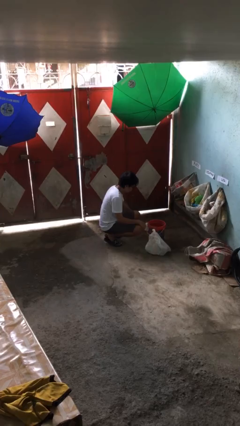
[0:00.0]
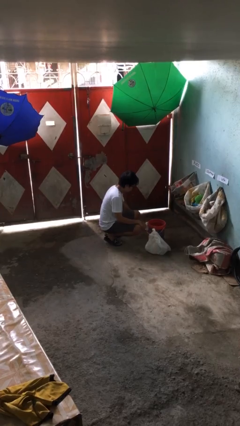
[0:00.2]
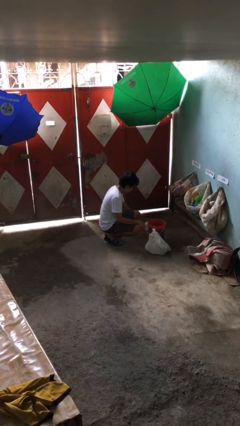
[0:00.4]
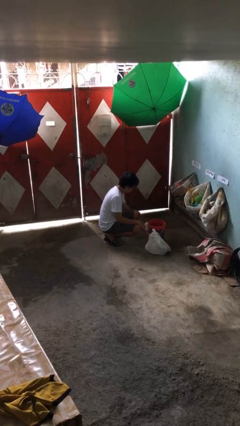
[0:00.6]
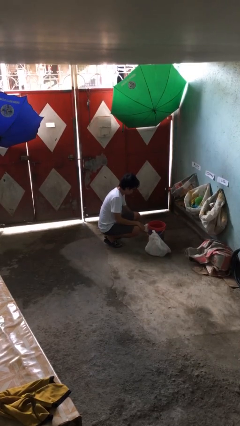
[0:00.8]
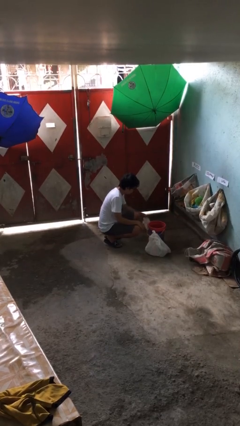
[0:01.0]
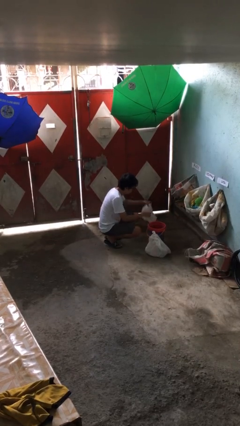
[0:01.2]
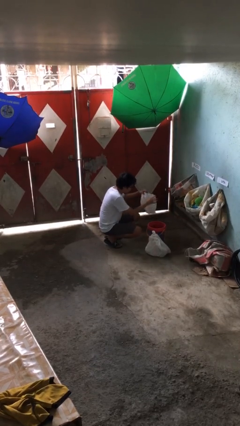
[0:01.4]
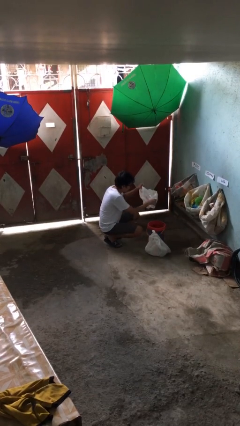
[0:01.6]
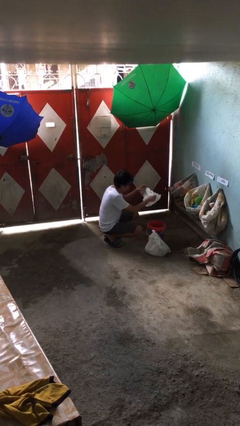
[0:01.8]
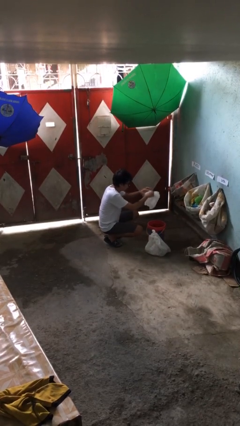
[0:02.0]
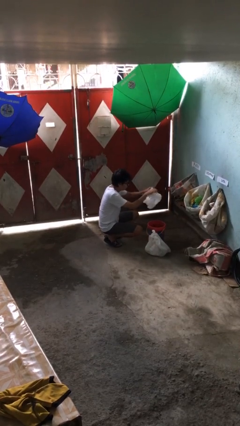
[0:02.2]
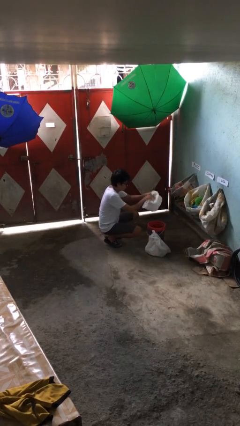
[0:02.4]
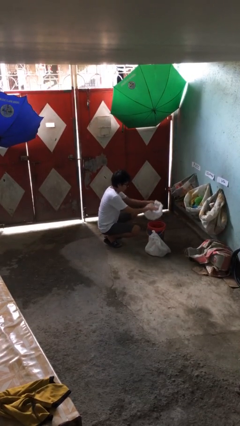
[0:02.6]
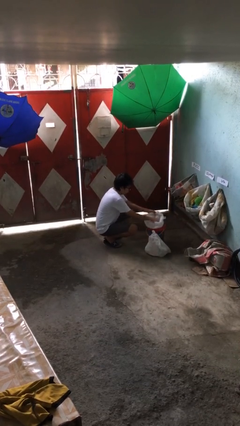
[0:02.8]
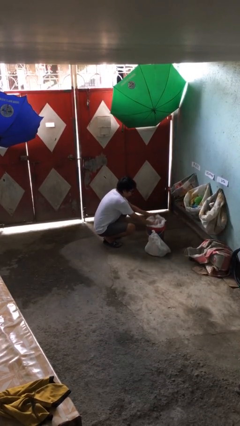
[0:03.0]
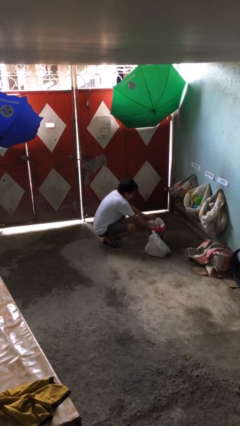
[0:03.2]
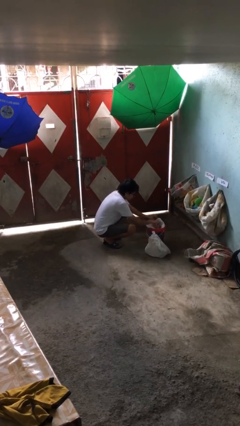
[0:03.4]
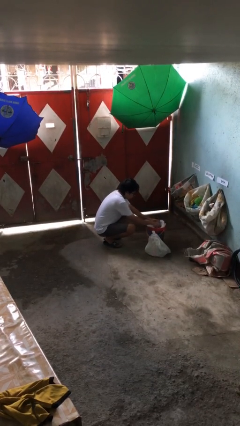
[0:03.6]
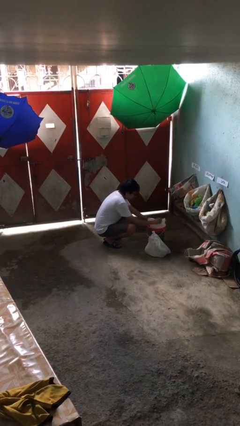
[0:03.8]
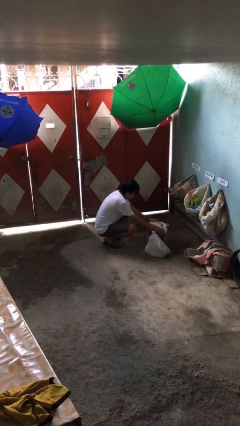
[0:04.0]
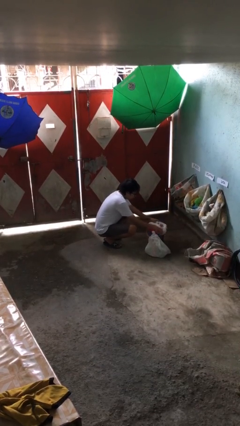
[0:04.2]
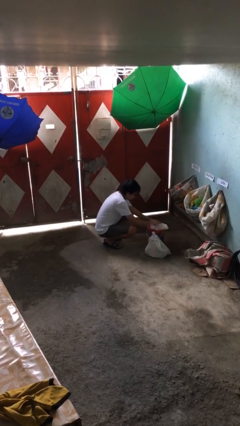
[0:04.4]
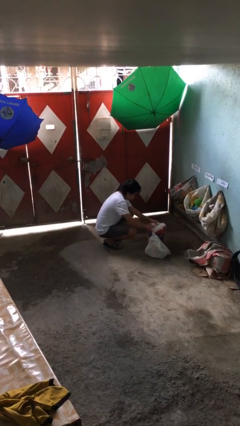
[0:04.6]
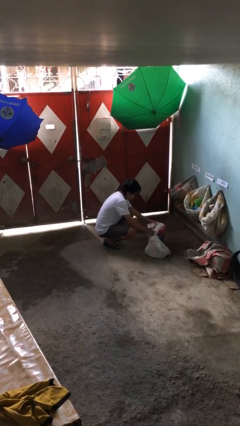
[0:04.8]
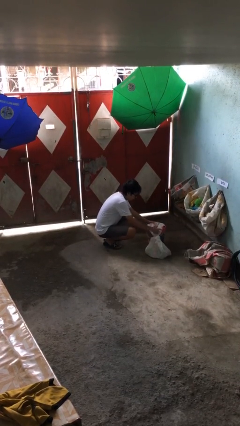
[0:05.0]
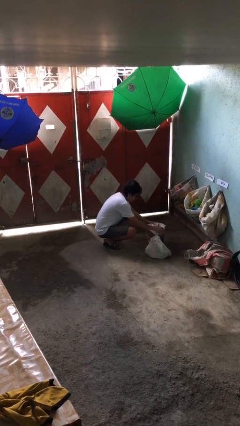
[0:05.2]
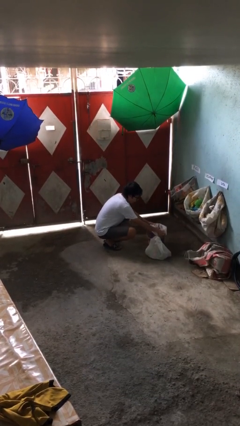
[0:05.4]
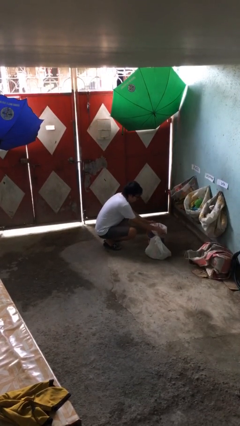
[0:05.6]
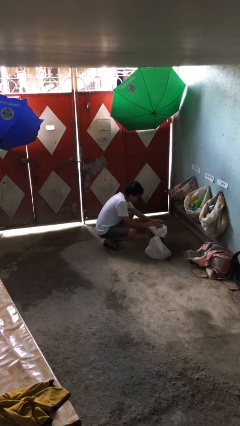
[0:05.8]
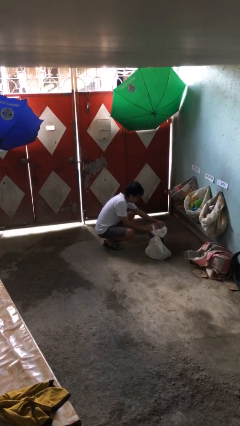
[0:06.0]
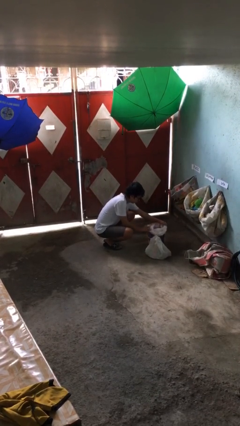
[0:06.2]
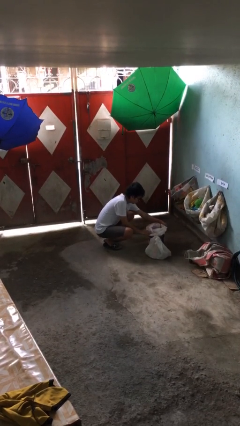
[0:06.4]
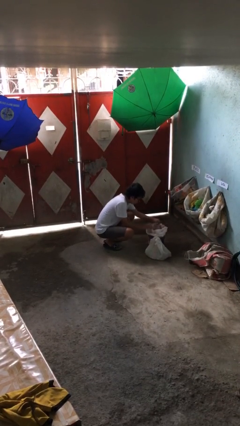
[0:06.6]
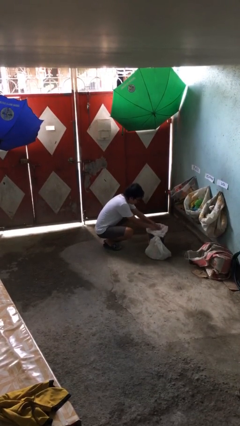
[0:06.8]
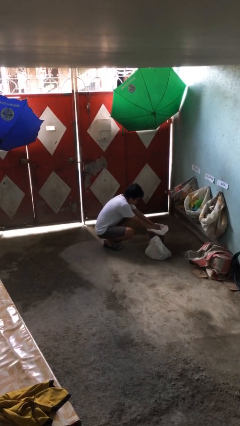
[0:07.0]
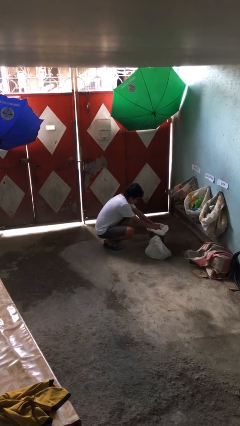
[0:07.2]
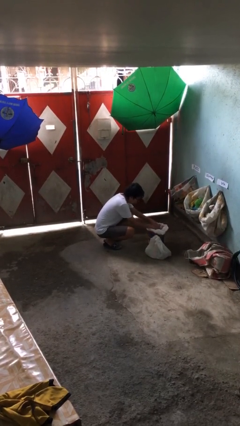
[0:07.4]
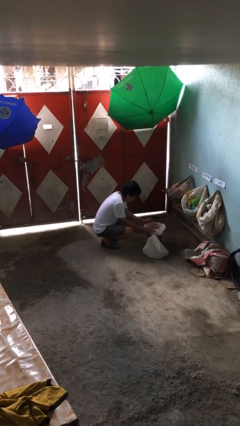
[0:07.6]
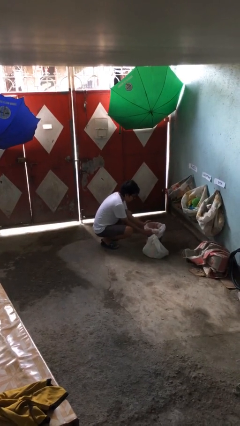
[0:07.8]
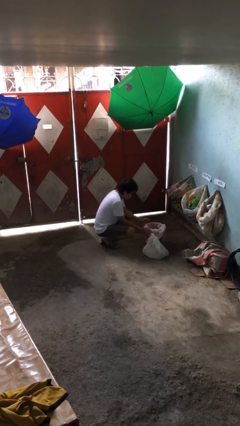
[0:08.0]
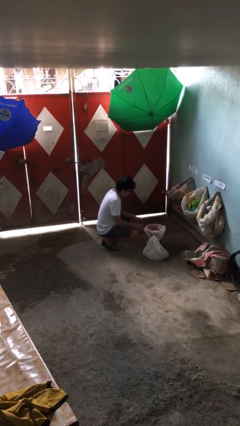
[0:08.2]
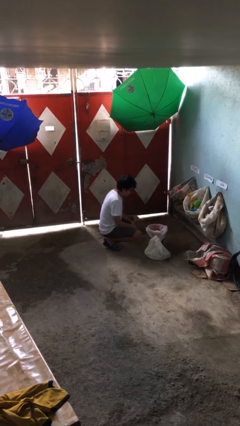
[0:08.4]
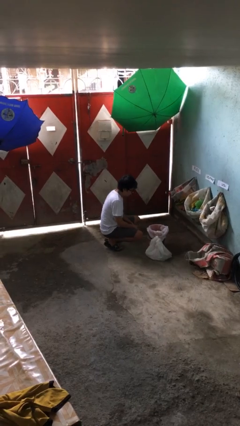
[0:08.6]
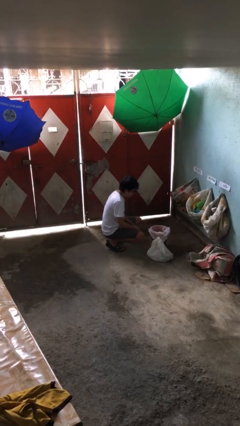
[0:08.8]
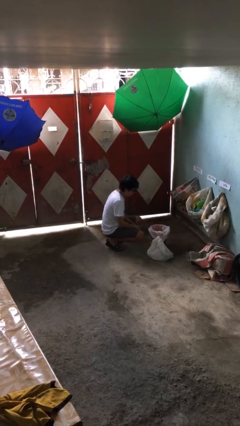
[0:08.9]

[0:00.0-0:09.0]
person inserts trashbag into trashcan

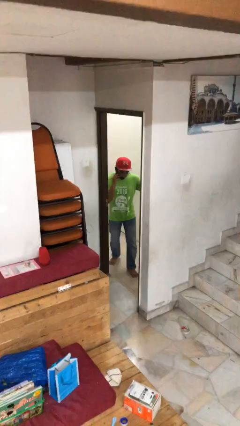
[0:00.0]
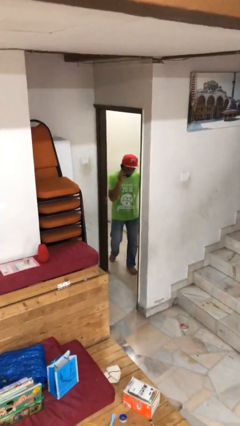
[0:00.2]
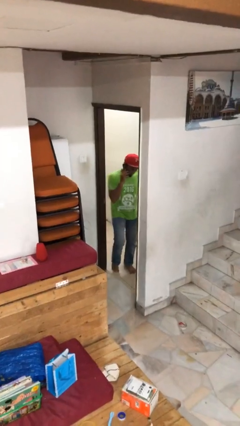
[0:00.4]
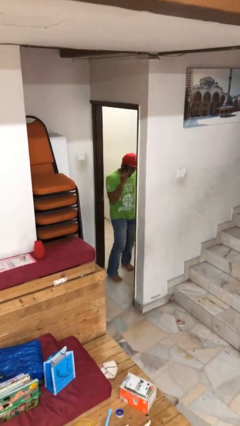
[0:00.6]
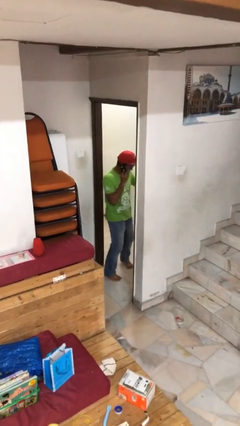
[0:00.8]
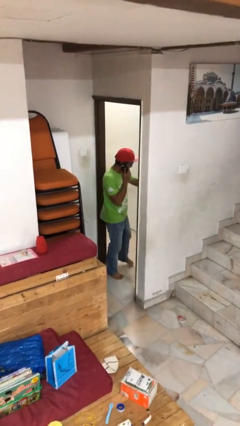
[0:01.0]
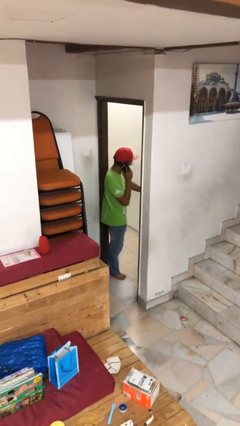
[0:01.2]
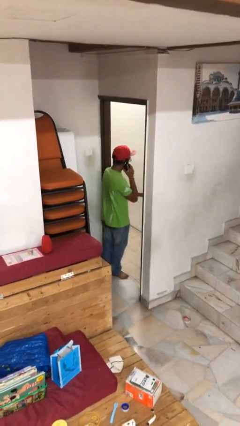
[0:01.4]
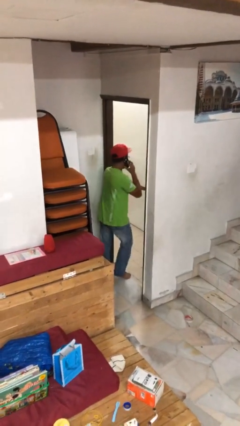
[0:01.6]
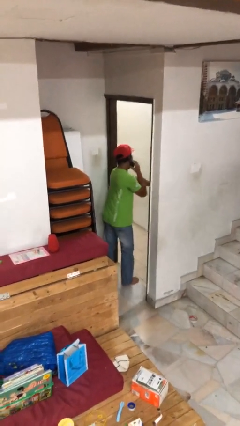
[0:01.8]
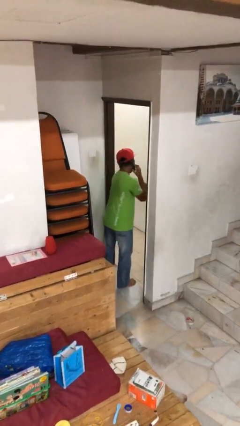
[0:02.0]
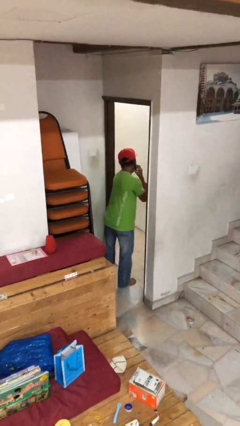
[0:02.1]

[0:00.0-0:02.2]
person enters scene through structure

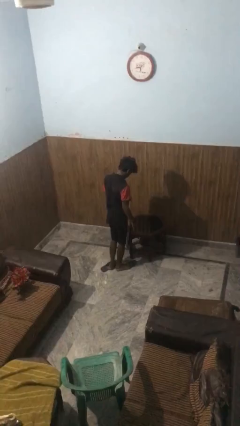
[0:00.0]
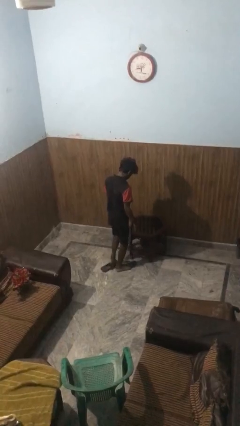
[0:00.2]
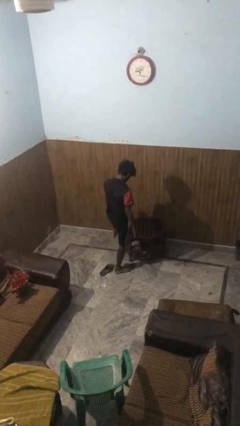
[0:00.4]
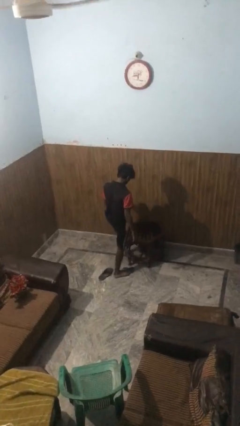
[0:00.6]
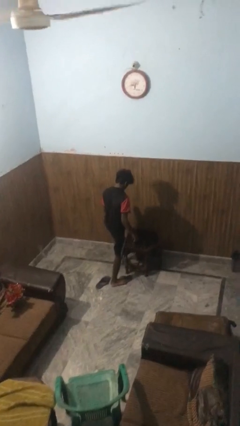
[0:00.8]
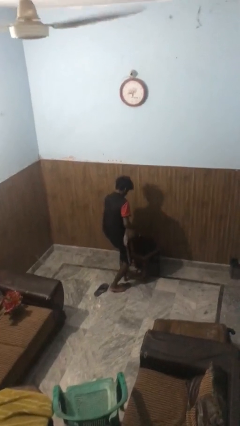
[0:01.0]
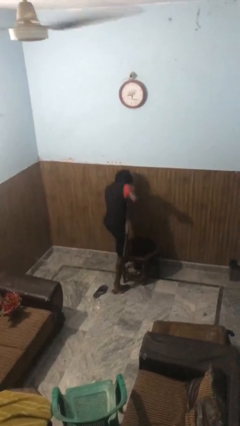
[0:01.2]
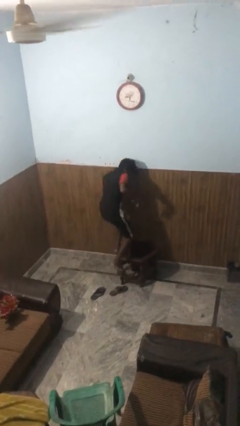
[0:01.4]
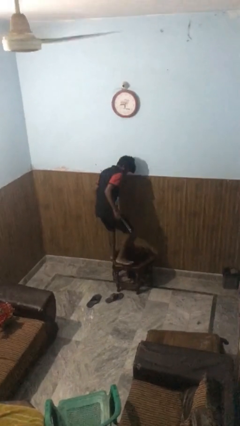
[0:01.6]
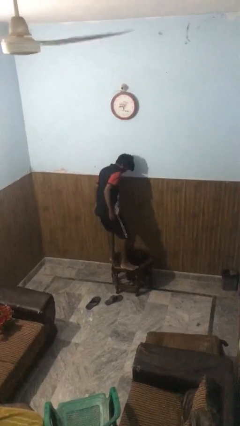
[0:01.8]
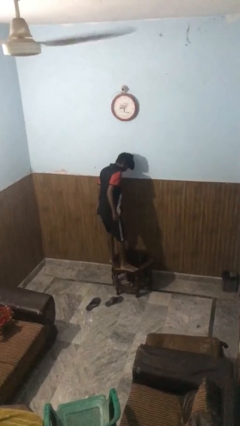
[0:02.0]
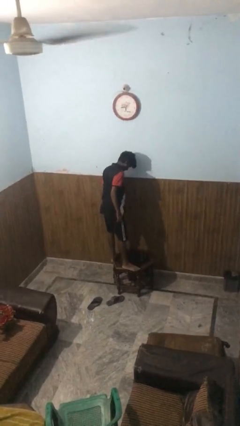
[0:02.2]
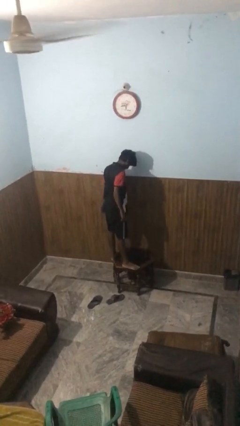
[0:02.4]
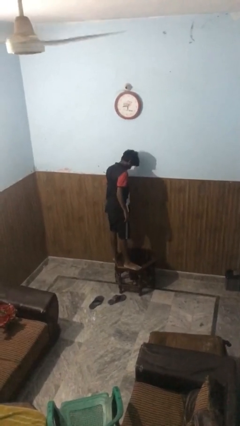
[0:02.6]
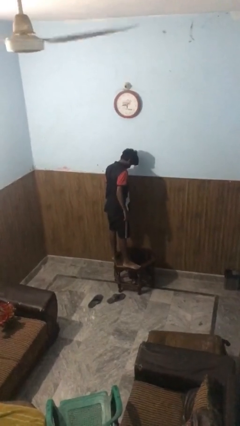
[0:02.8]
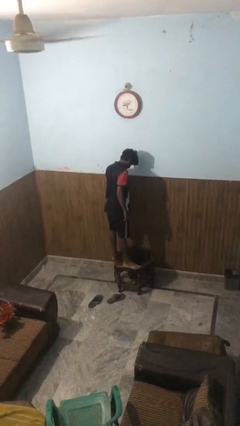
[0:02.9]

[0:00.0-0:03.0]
person climbs on table

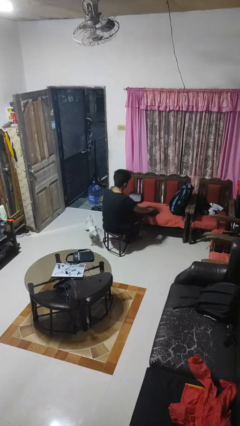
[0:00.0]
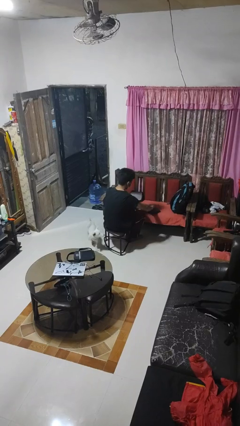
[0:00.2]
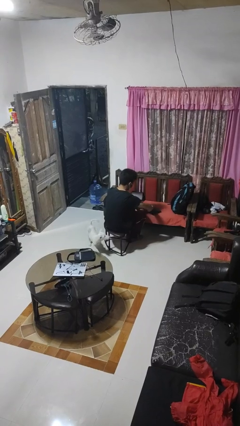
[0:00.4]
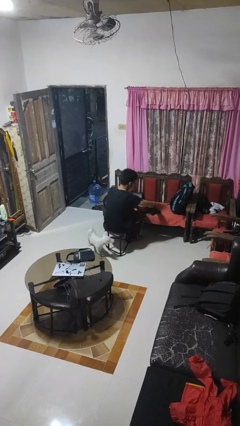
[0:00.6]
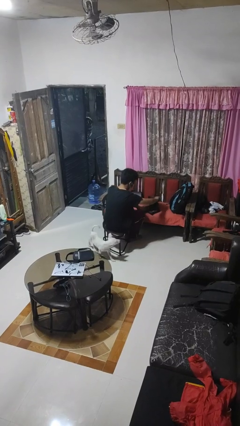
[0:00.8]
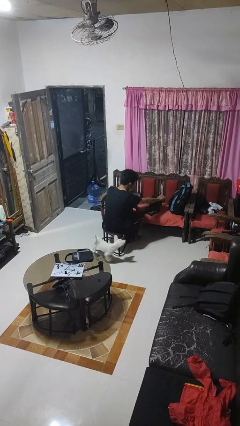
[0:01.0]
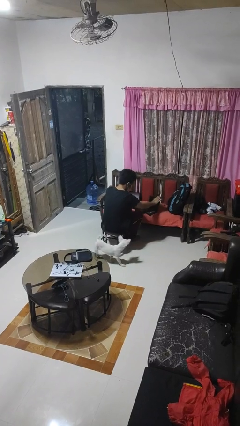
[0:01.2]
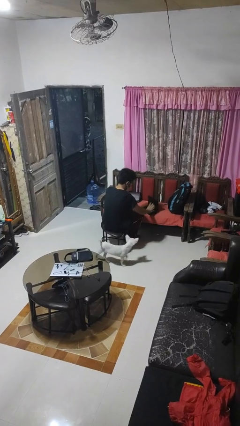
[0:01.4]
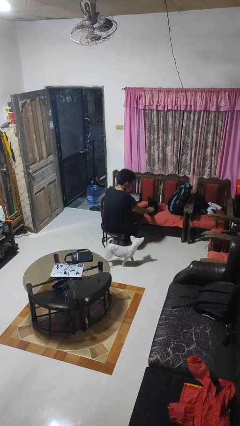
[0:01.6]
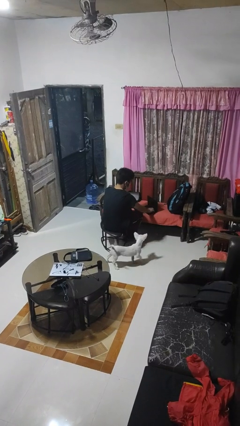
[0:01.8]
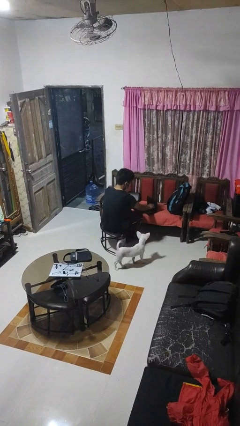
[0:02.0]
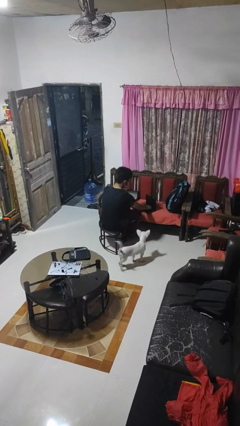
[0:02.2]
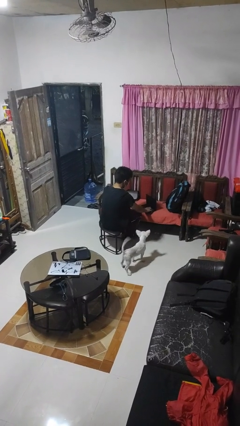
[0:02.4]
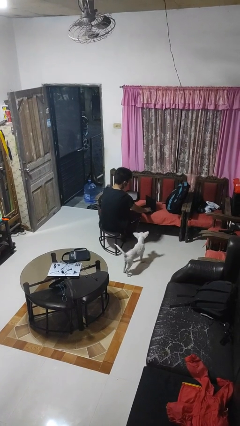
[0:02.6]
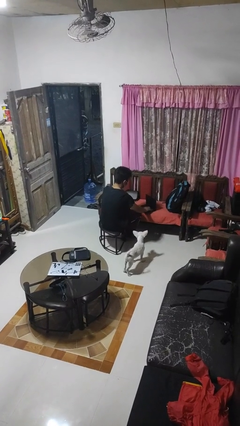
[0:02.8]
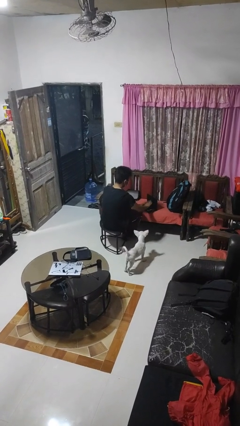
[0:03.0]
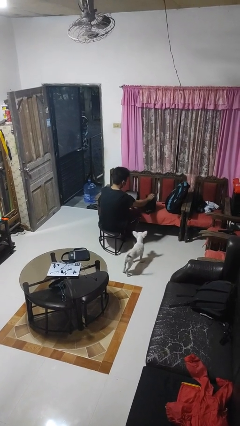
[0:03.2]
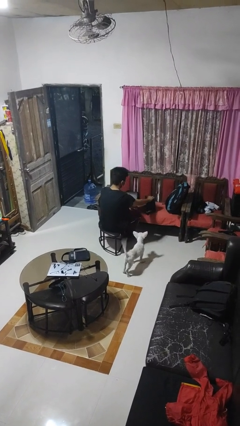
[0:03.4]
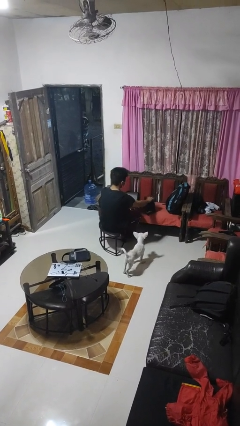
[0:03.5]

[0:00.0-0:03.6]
person opens laptop
